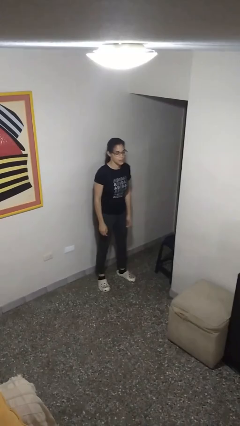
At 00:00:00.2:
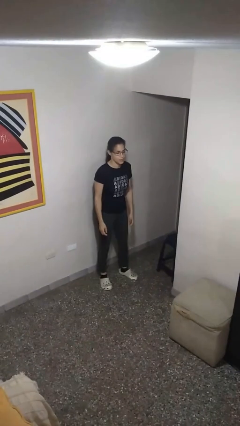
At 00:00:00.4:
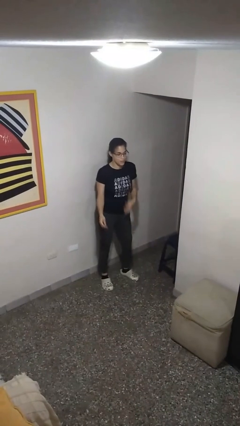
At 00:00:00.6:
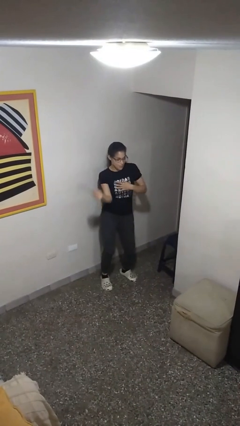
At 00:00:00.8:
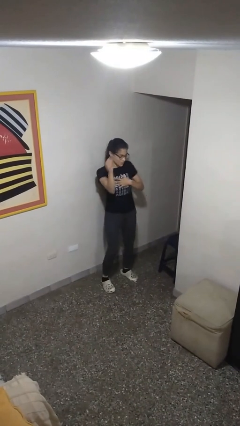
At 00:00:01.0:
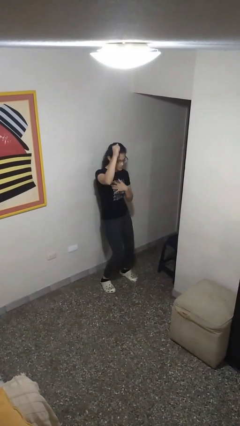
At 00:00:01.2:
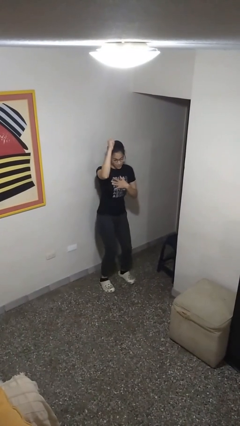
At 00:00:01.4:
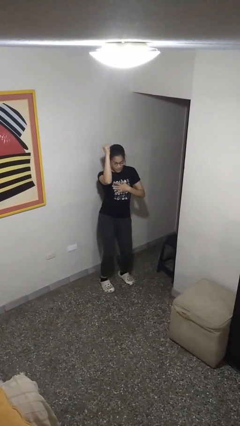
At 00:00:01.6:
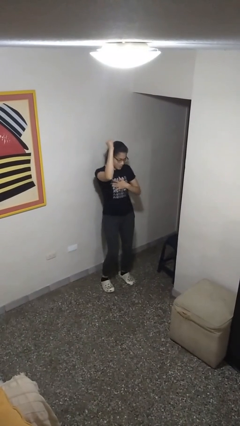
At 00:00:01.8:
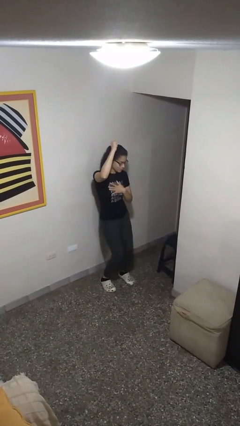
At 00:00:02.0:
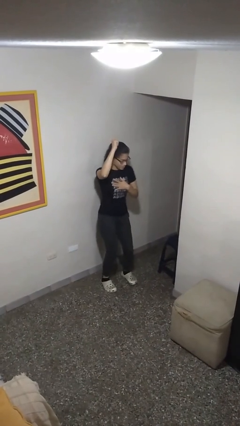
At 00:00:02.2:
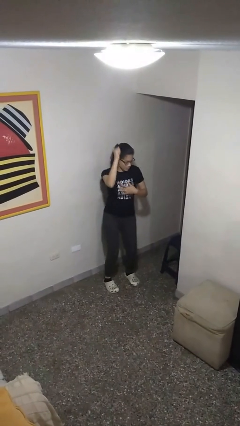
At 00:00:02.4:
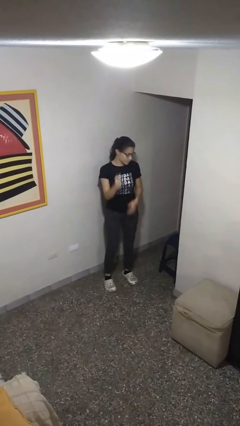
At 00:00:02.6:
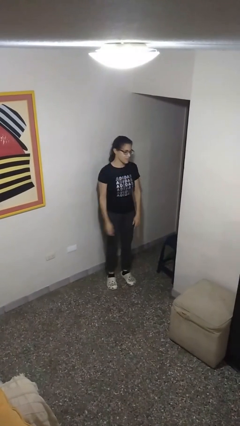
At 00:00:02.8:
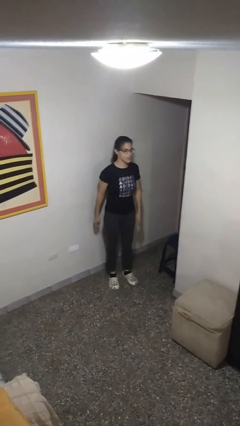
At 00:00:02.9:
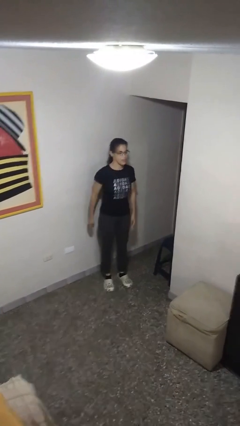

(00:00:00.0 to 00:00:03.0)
person dances in place

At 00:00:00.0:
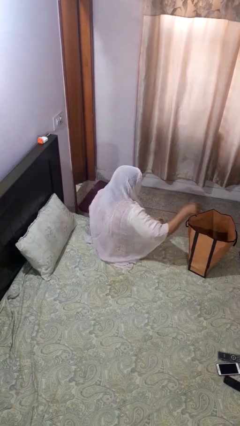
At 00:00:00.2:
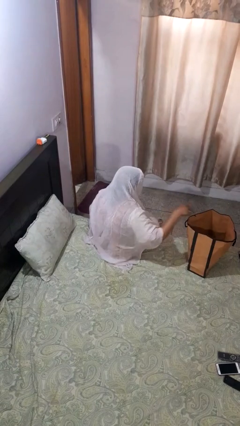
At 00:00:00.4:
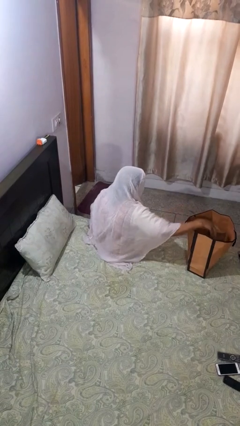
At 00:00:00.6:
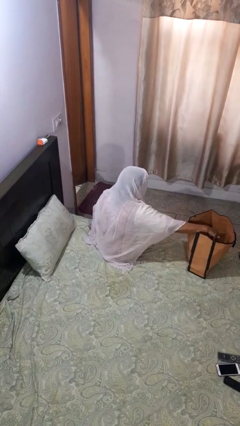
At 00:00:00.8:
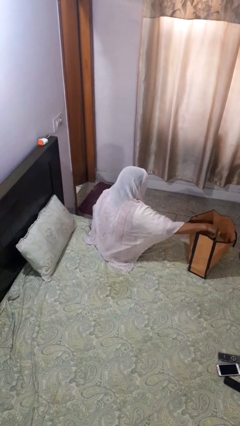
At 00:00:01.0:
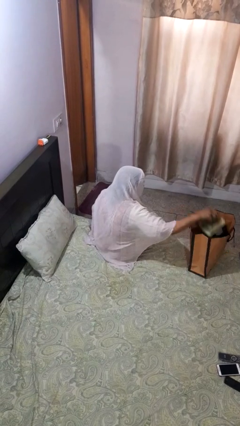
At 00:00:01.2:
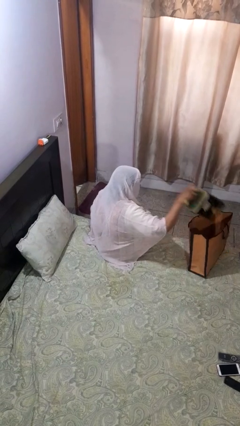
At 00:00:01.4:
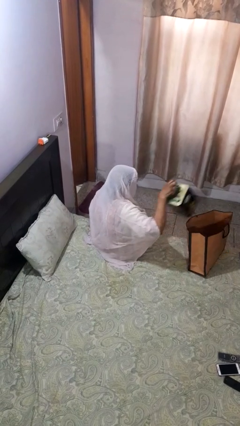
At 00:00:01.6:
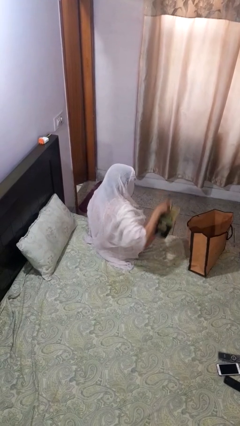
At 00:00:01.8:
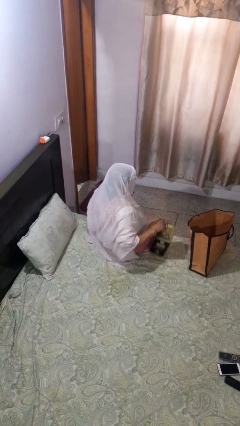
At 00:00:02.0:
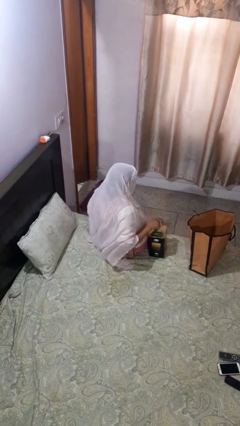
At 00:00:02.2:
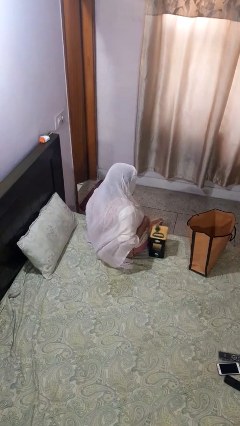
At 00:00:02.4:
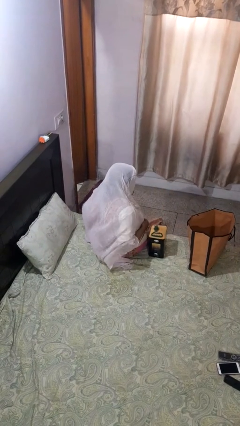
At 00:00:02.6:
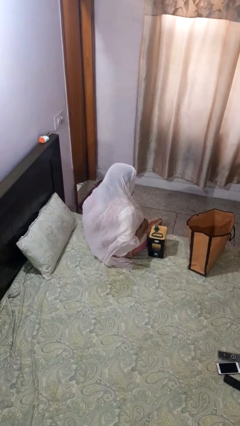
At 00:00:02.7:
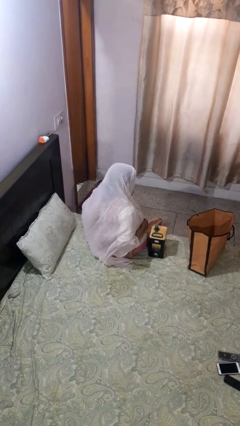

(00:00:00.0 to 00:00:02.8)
person takes object from bag

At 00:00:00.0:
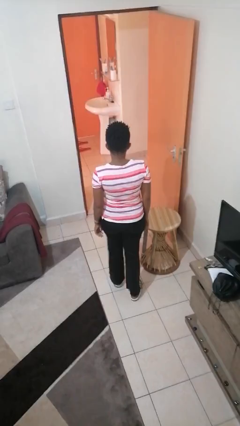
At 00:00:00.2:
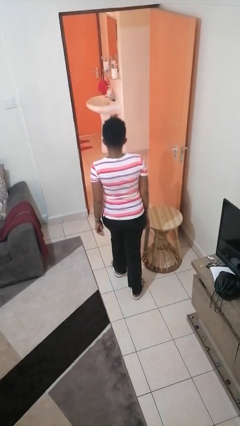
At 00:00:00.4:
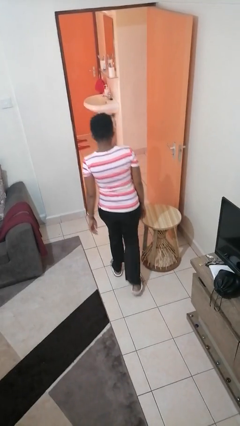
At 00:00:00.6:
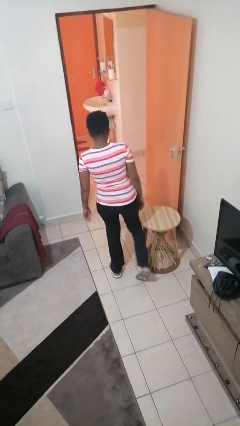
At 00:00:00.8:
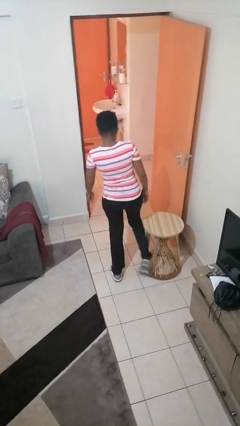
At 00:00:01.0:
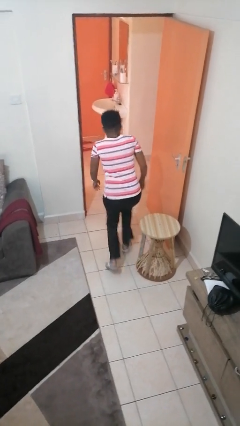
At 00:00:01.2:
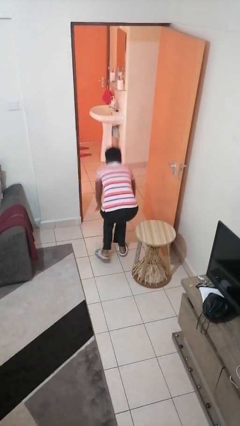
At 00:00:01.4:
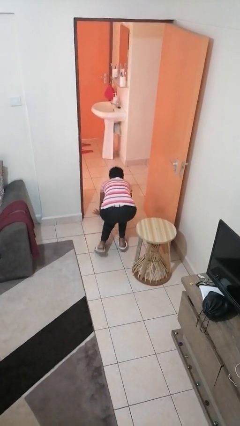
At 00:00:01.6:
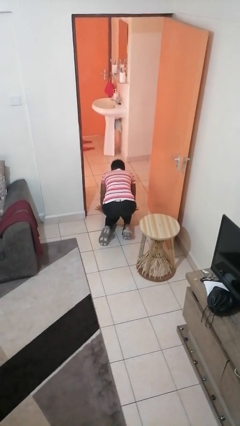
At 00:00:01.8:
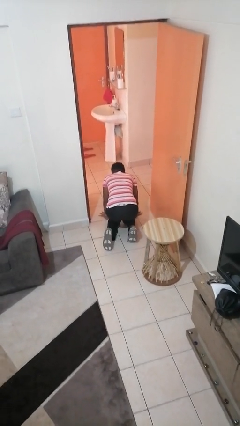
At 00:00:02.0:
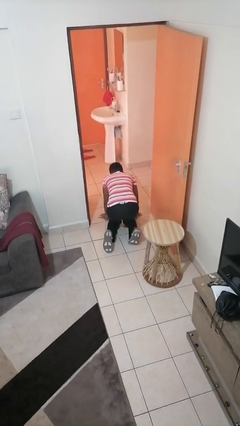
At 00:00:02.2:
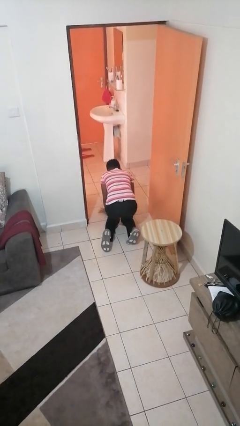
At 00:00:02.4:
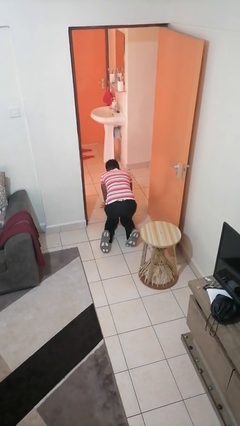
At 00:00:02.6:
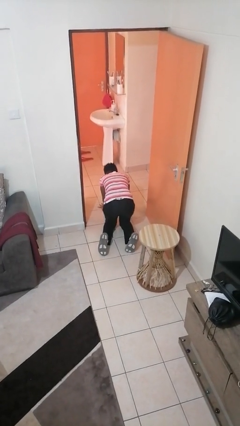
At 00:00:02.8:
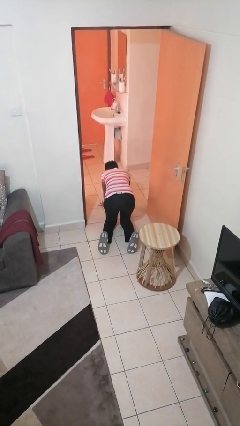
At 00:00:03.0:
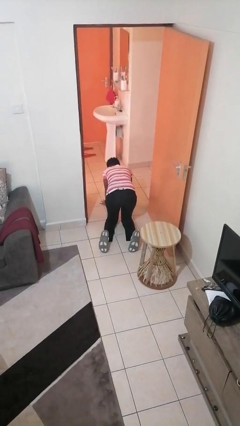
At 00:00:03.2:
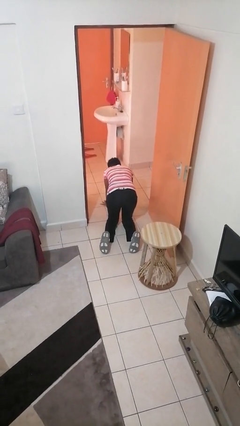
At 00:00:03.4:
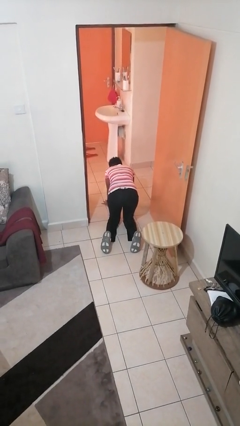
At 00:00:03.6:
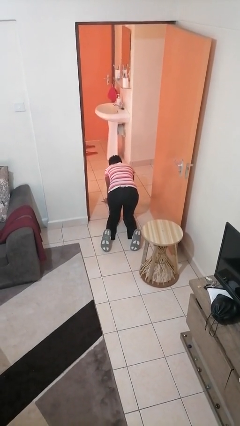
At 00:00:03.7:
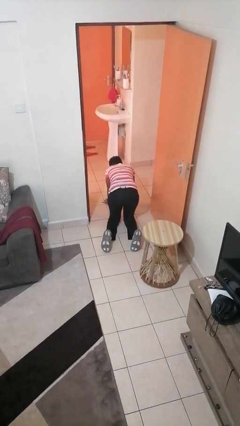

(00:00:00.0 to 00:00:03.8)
person trips on object on floor

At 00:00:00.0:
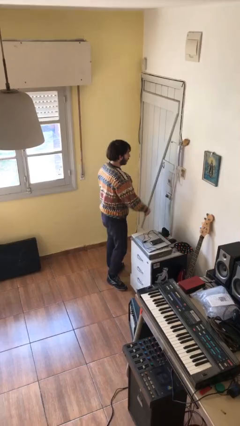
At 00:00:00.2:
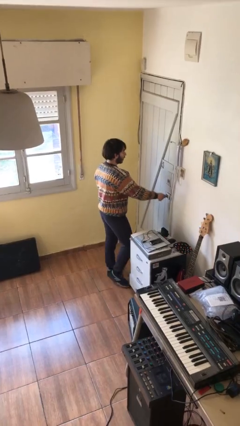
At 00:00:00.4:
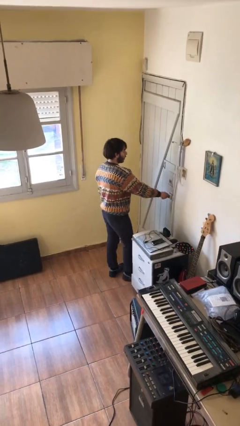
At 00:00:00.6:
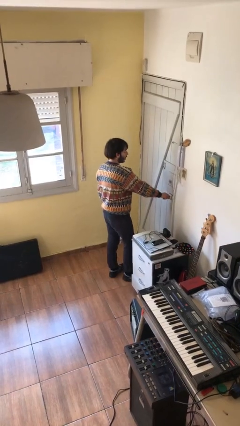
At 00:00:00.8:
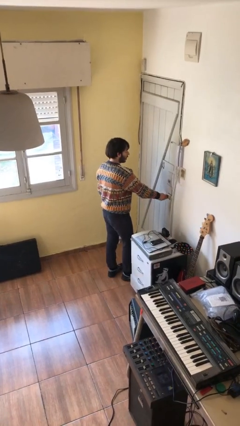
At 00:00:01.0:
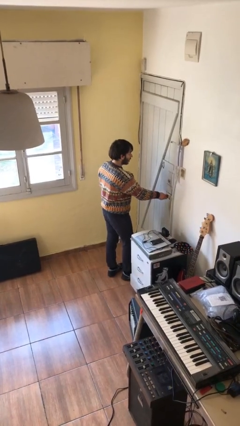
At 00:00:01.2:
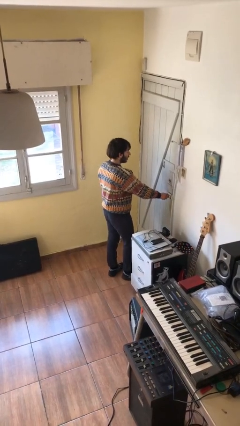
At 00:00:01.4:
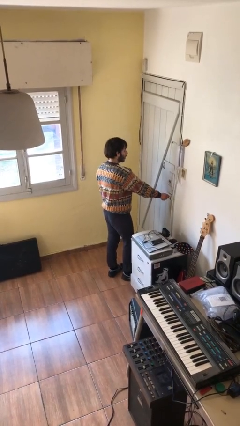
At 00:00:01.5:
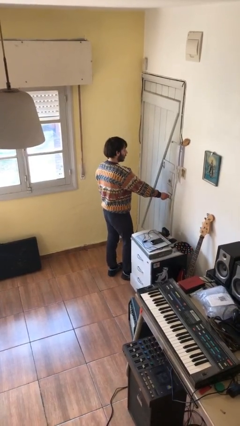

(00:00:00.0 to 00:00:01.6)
person locks door with keys

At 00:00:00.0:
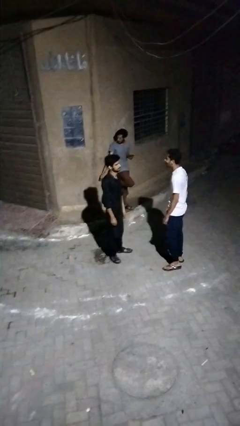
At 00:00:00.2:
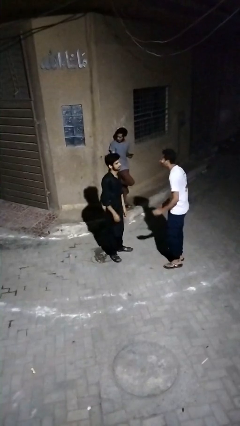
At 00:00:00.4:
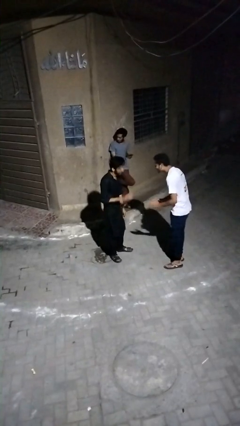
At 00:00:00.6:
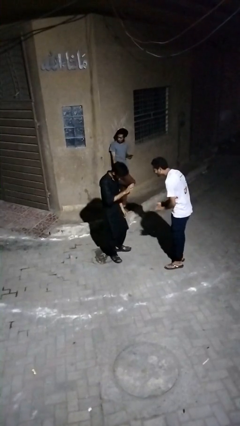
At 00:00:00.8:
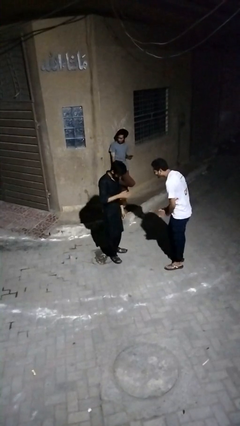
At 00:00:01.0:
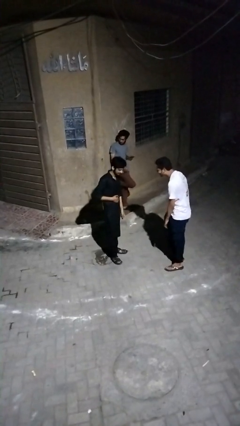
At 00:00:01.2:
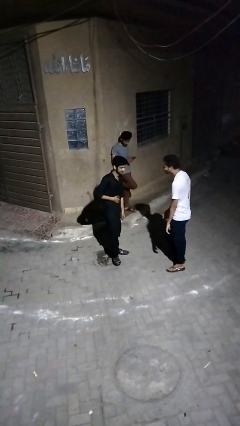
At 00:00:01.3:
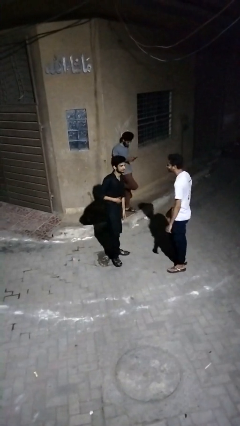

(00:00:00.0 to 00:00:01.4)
person laughs with person

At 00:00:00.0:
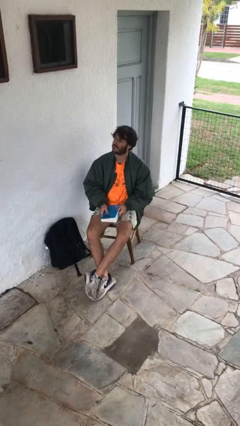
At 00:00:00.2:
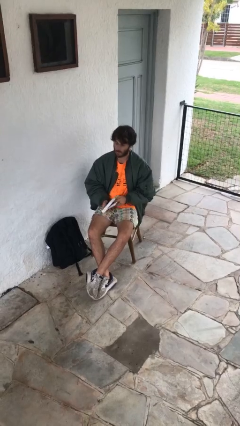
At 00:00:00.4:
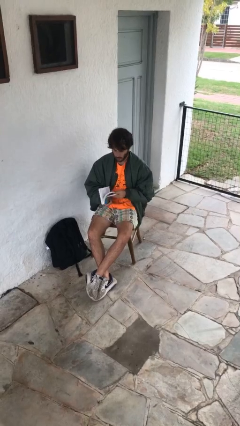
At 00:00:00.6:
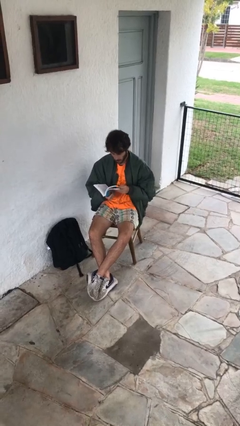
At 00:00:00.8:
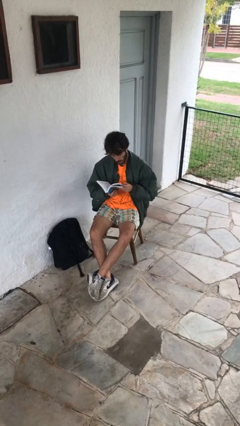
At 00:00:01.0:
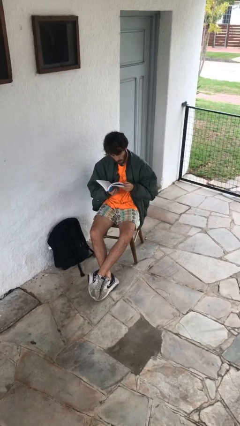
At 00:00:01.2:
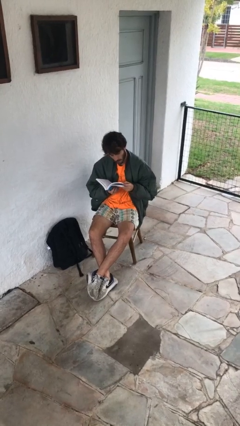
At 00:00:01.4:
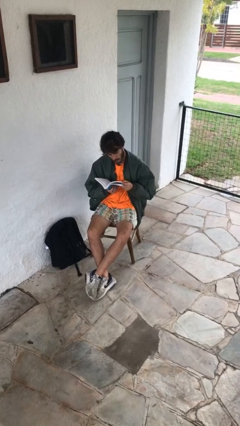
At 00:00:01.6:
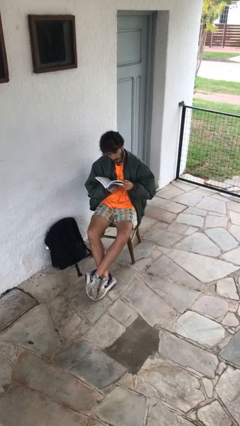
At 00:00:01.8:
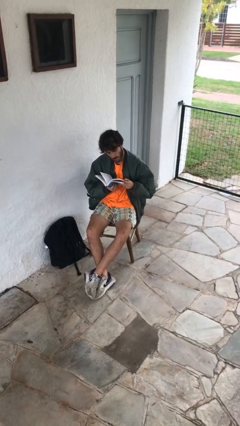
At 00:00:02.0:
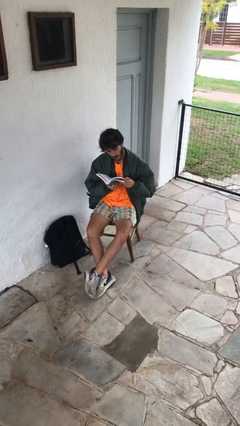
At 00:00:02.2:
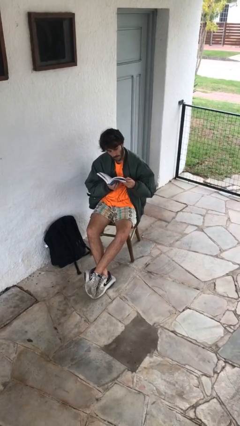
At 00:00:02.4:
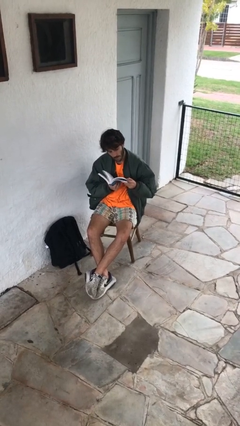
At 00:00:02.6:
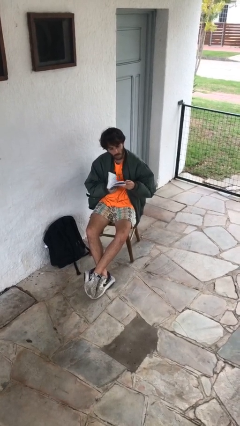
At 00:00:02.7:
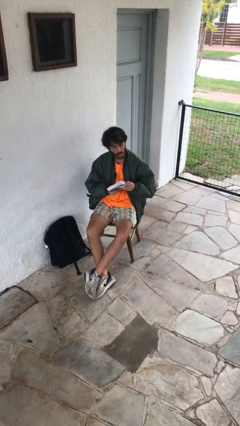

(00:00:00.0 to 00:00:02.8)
person reads document

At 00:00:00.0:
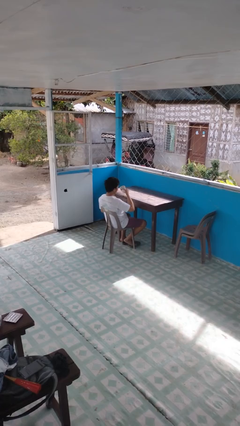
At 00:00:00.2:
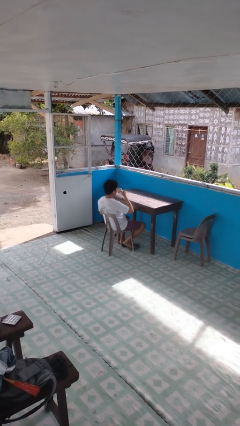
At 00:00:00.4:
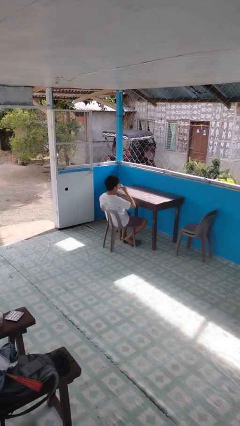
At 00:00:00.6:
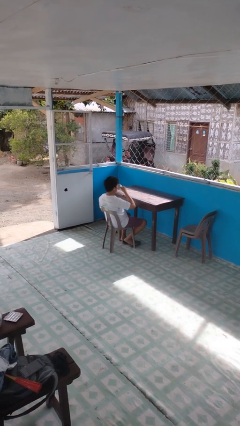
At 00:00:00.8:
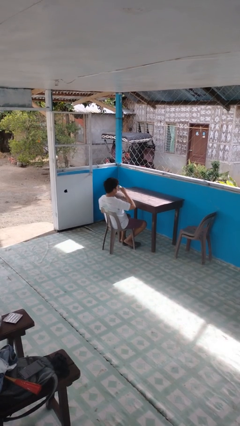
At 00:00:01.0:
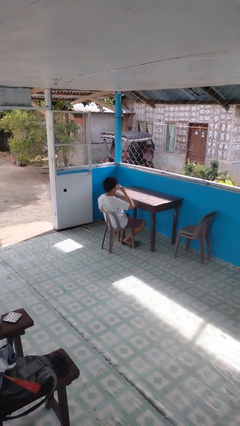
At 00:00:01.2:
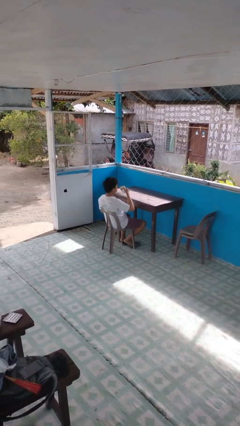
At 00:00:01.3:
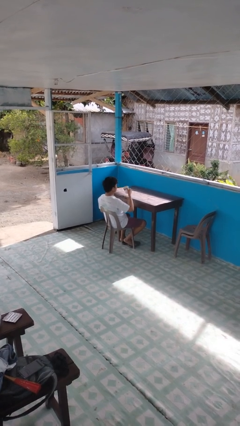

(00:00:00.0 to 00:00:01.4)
person drinks from mug
